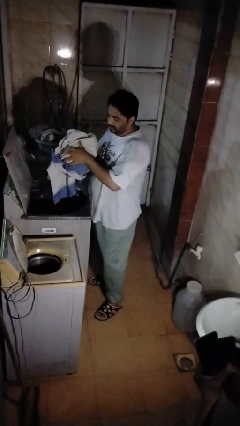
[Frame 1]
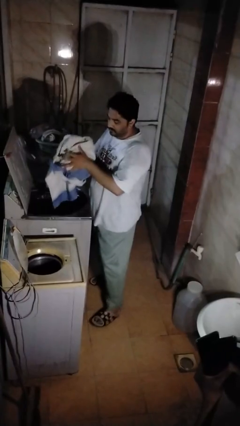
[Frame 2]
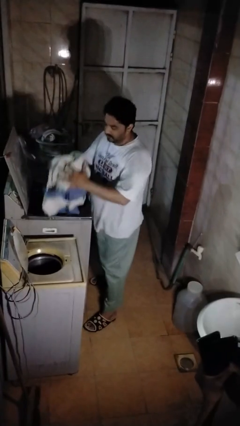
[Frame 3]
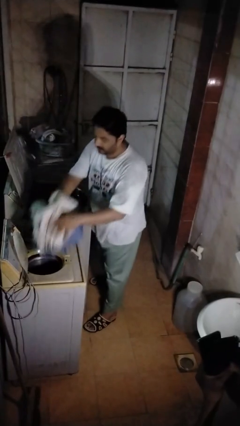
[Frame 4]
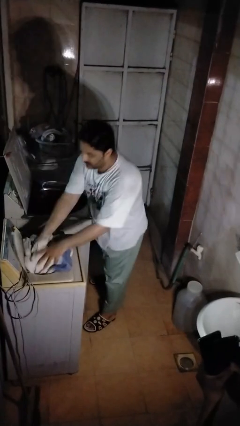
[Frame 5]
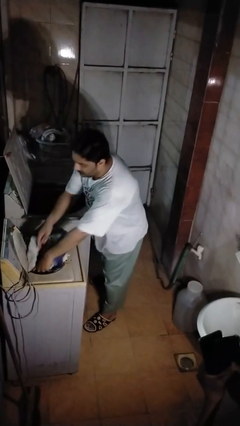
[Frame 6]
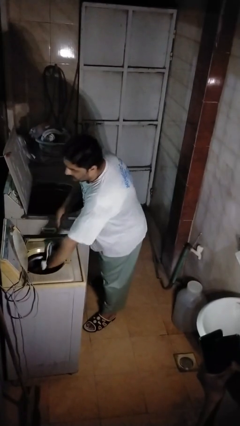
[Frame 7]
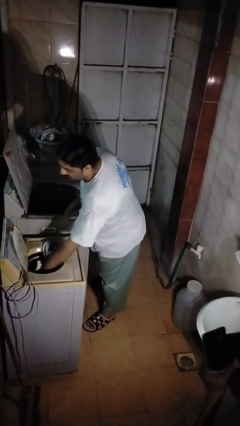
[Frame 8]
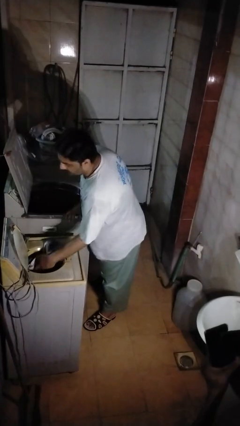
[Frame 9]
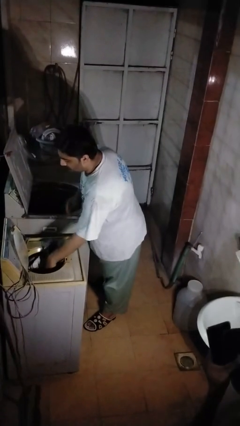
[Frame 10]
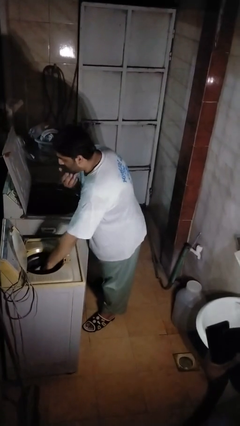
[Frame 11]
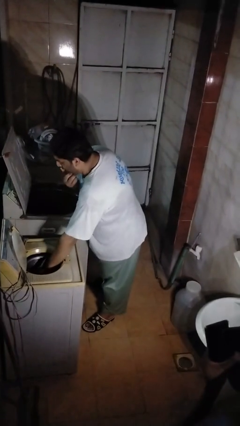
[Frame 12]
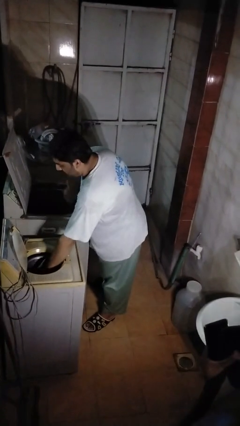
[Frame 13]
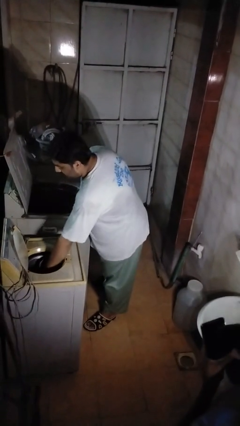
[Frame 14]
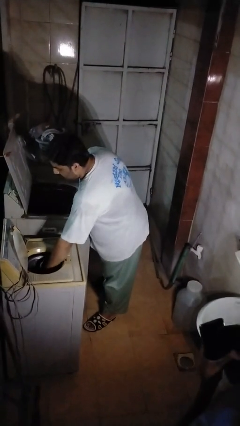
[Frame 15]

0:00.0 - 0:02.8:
person loads dryer

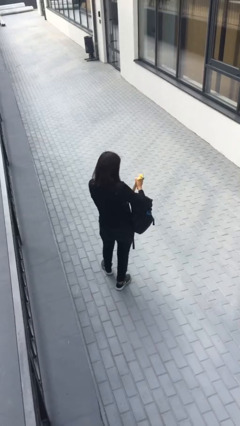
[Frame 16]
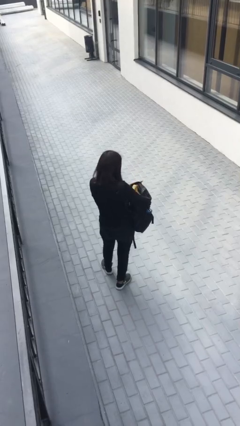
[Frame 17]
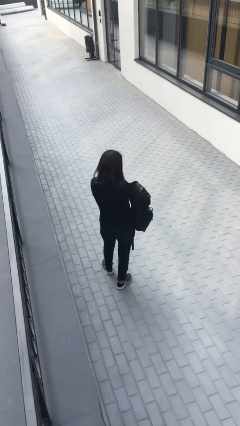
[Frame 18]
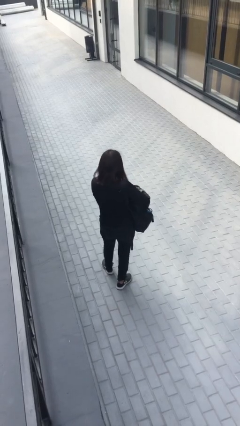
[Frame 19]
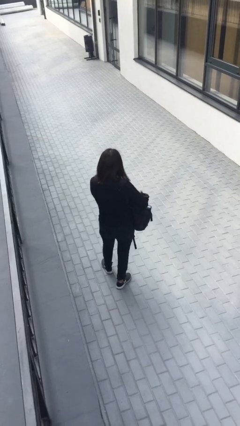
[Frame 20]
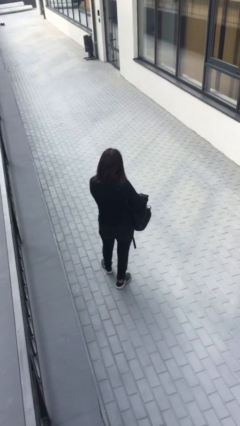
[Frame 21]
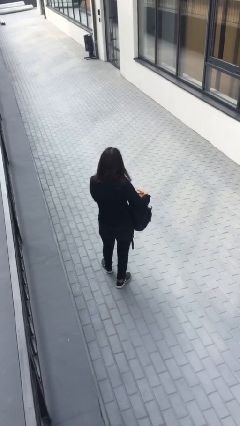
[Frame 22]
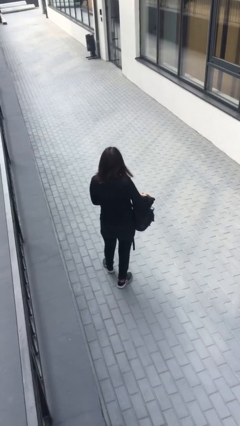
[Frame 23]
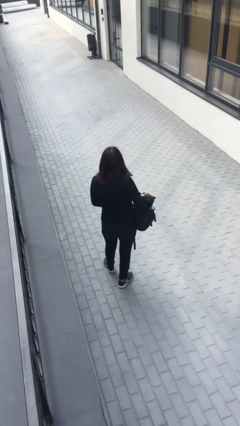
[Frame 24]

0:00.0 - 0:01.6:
person puts object into backpack

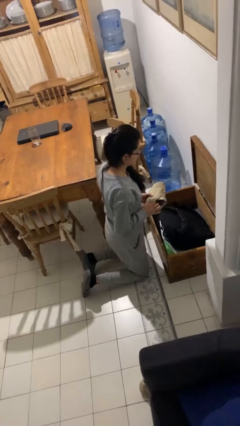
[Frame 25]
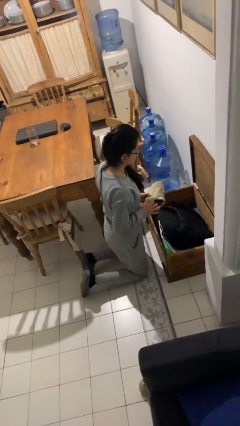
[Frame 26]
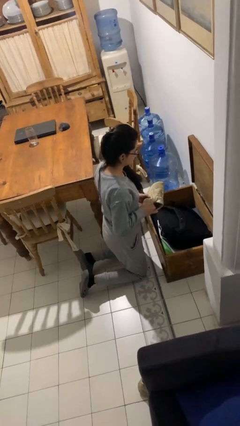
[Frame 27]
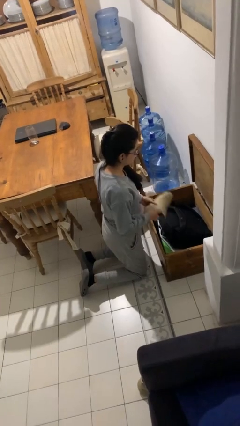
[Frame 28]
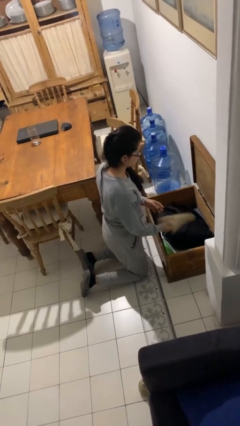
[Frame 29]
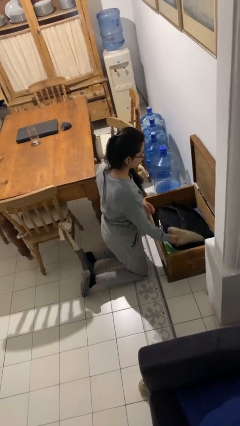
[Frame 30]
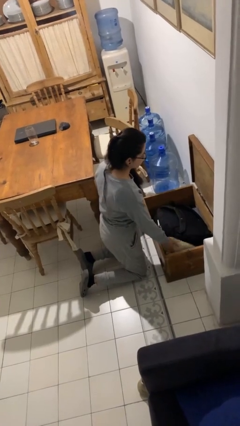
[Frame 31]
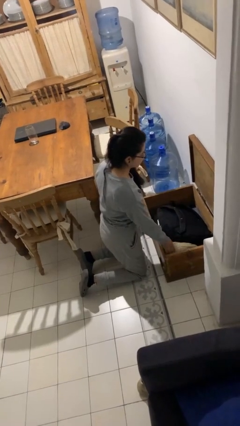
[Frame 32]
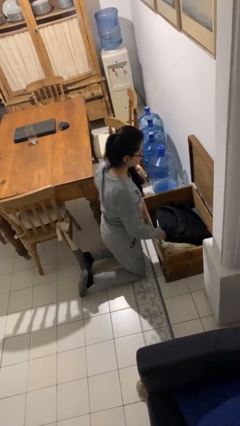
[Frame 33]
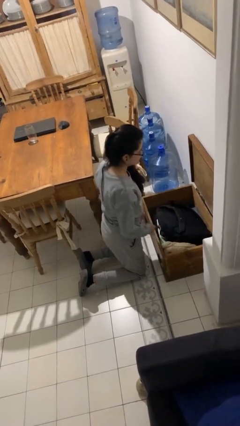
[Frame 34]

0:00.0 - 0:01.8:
person puts object into box

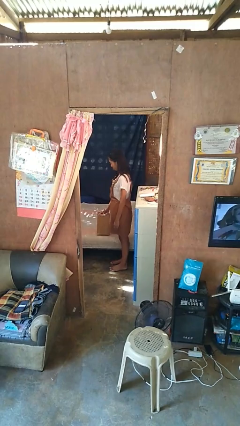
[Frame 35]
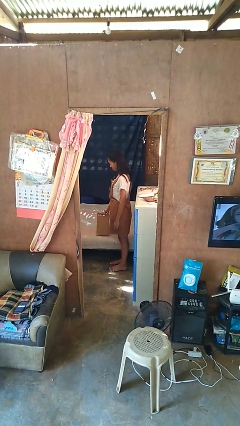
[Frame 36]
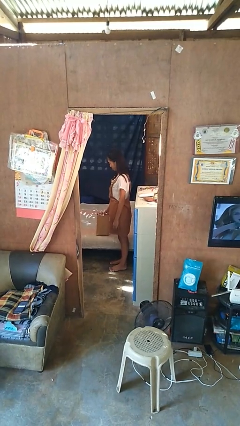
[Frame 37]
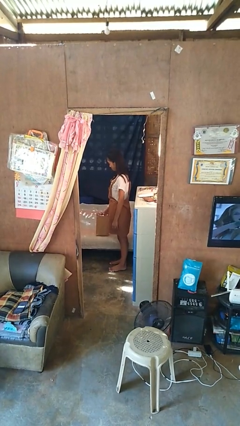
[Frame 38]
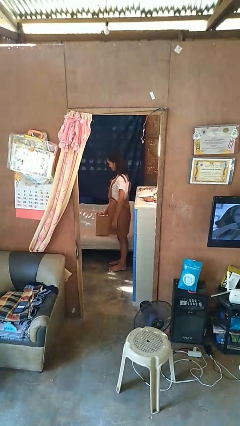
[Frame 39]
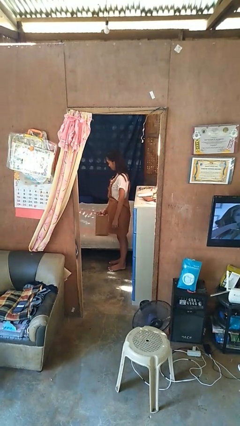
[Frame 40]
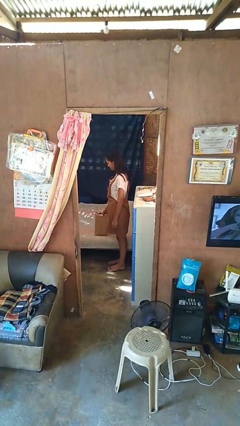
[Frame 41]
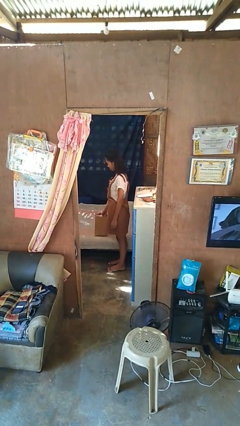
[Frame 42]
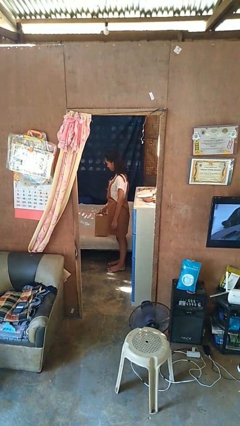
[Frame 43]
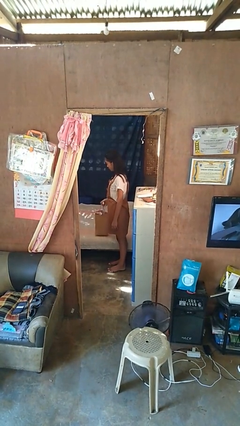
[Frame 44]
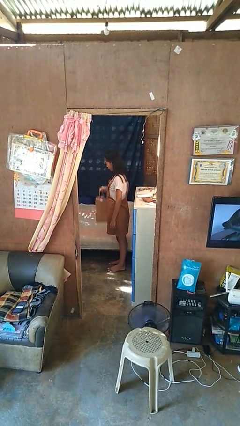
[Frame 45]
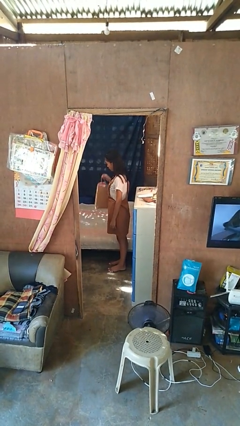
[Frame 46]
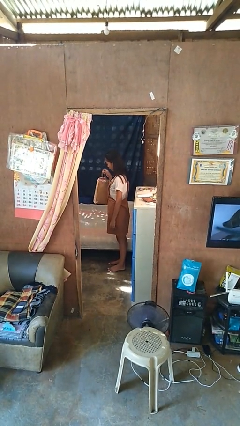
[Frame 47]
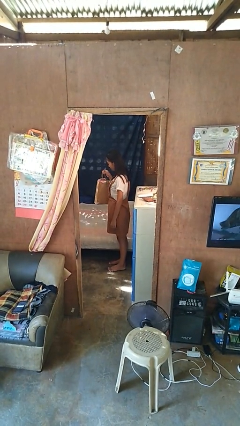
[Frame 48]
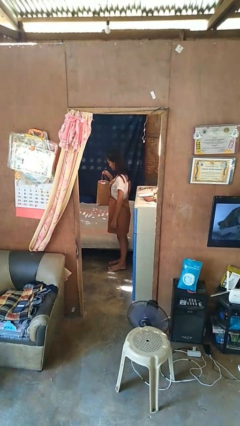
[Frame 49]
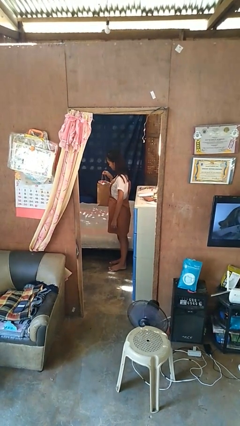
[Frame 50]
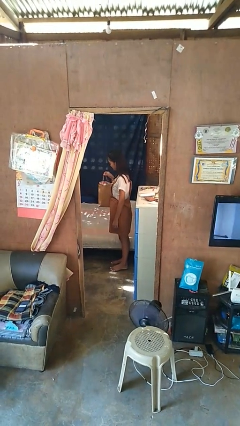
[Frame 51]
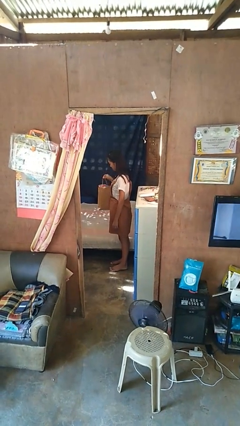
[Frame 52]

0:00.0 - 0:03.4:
person picks up object from couch

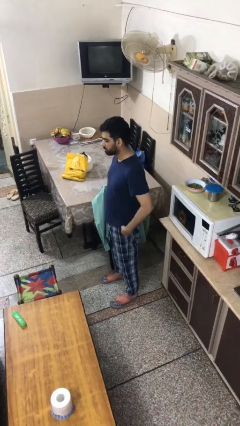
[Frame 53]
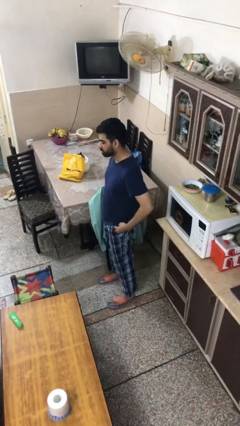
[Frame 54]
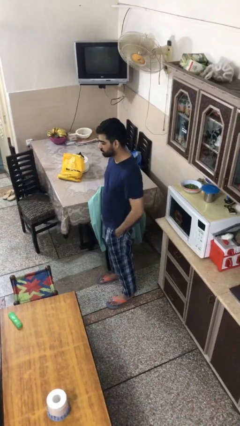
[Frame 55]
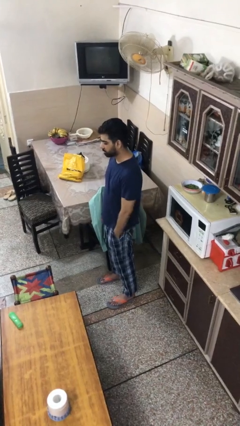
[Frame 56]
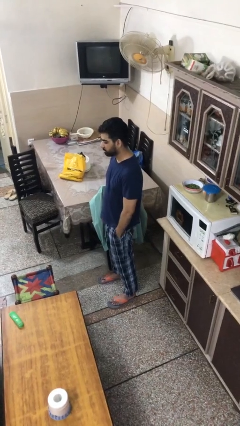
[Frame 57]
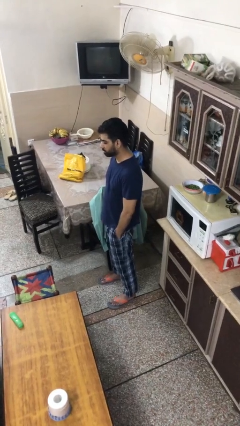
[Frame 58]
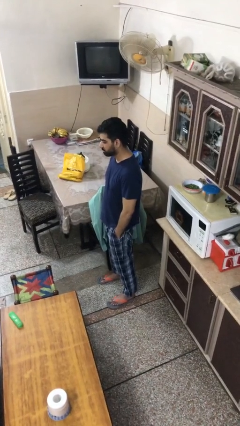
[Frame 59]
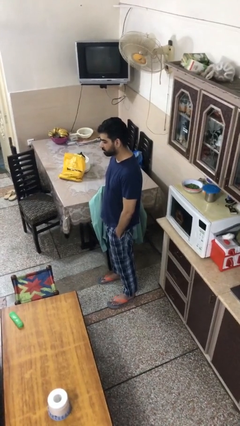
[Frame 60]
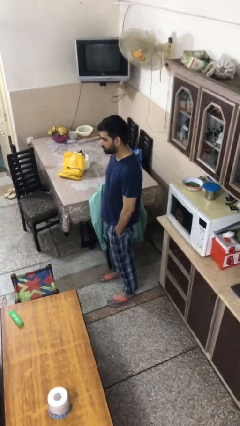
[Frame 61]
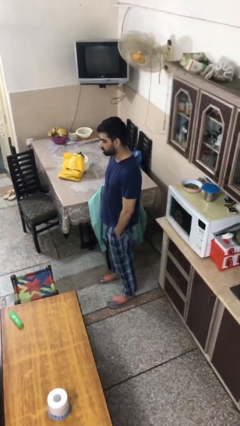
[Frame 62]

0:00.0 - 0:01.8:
person puts hands in back pockets

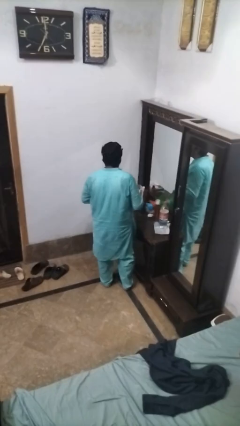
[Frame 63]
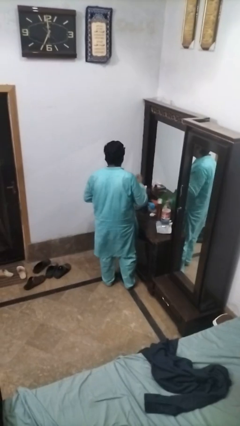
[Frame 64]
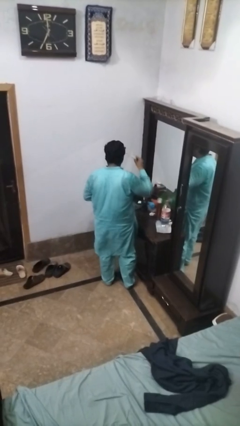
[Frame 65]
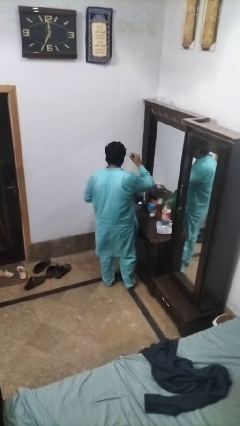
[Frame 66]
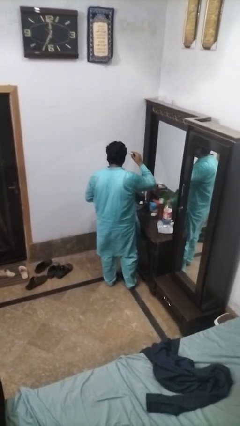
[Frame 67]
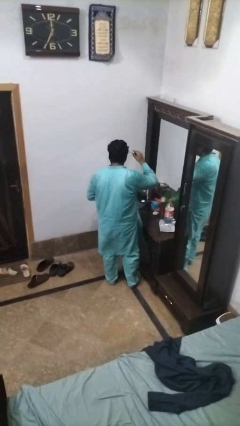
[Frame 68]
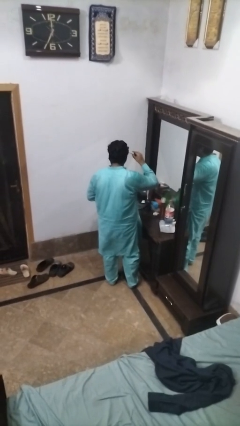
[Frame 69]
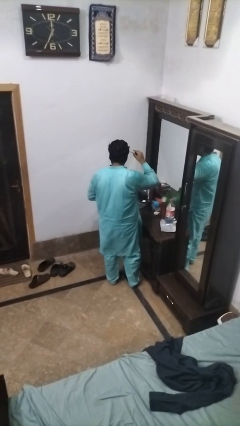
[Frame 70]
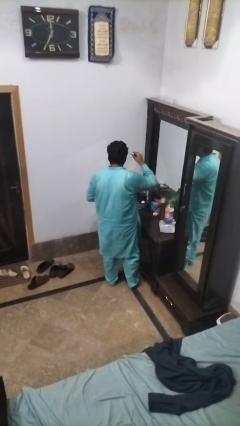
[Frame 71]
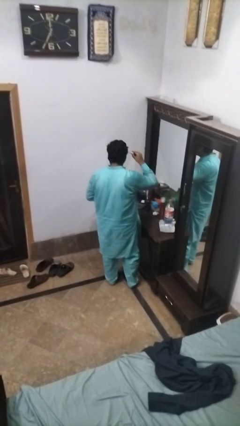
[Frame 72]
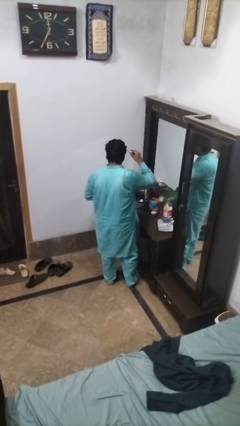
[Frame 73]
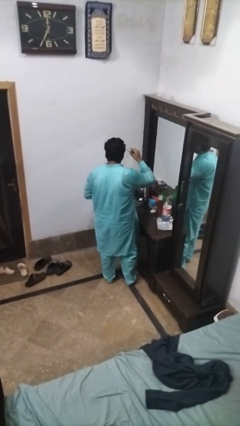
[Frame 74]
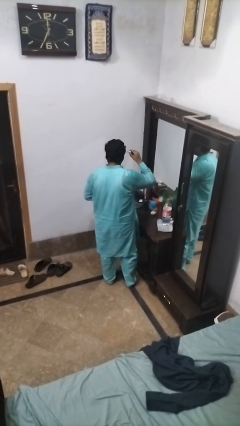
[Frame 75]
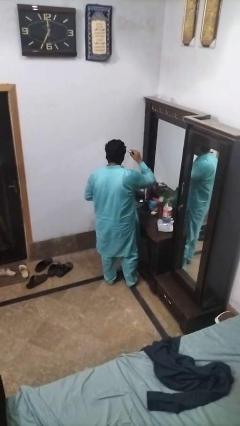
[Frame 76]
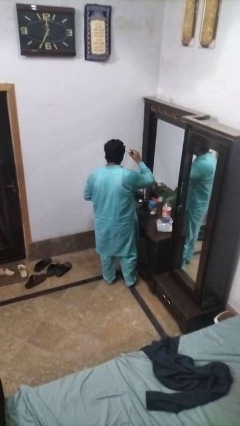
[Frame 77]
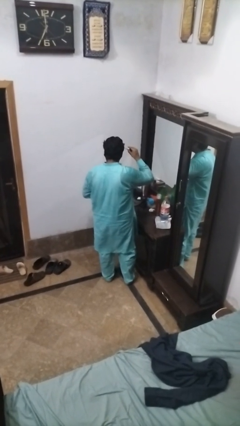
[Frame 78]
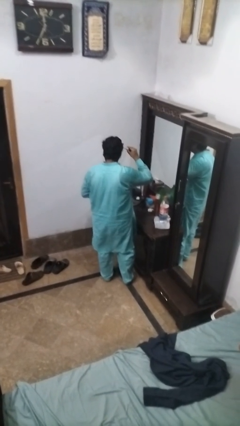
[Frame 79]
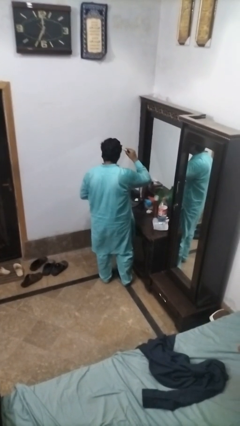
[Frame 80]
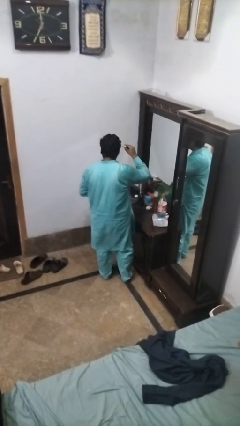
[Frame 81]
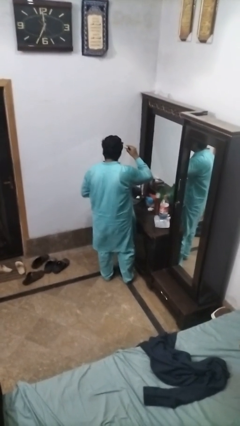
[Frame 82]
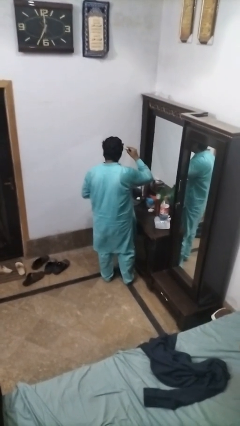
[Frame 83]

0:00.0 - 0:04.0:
person applies eye makeup

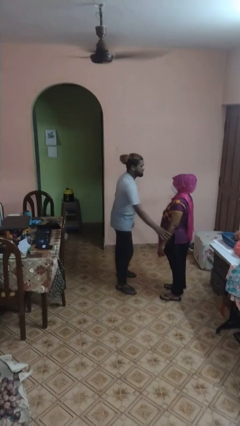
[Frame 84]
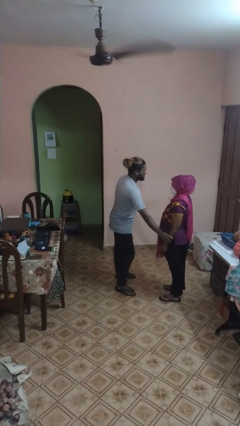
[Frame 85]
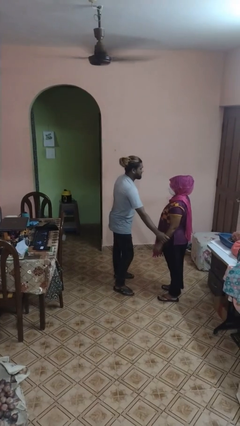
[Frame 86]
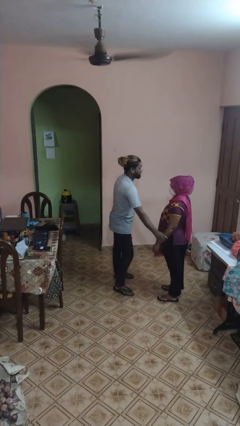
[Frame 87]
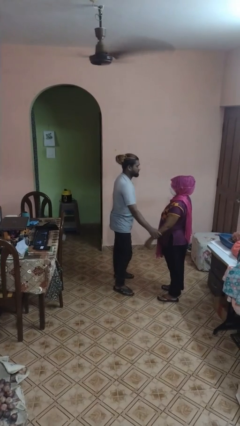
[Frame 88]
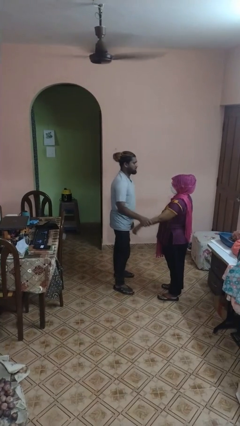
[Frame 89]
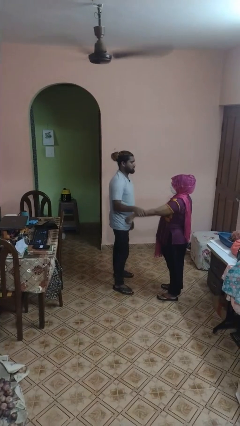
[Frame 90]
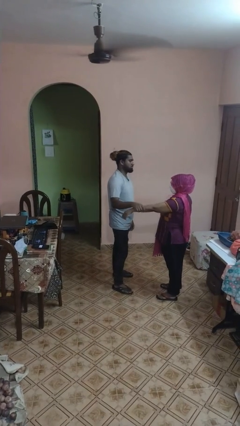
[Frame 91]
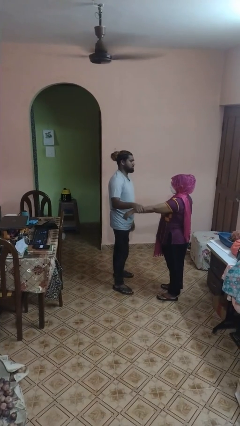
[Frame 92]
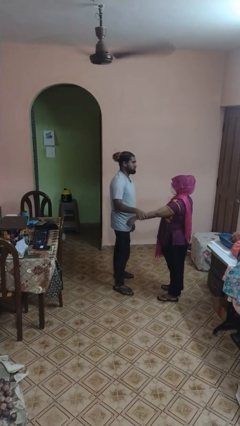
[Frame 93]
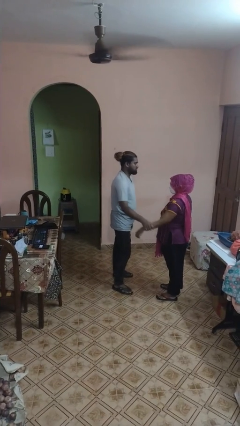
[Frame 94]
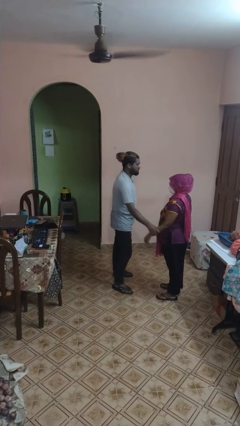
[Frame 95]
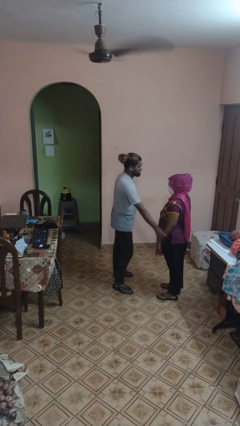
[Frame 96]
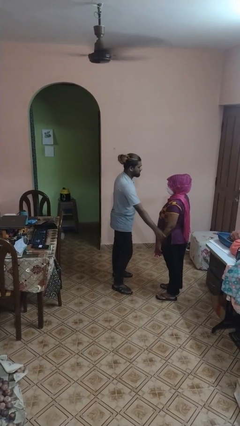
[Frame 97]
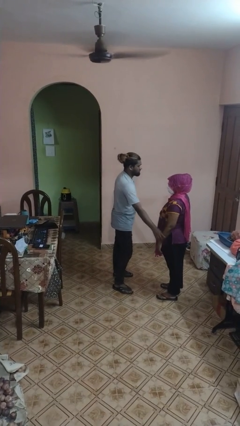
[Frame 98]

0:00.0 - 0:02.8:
person grabs person by forearm
